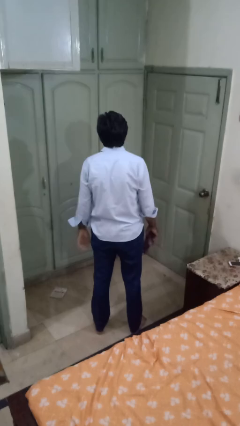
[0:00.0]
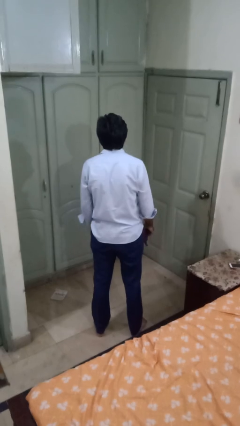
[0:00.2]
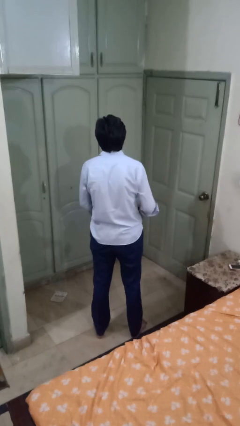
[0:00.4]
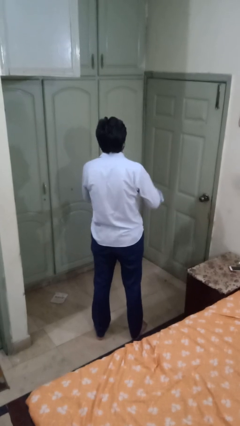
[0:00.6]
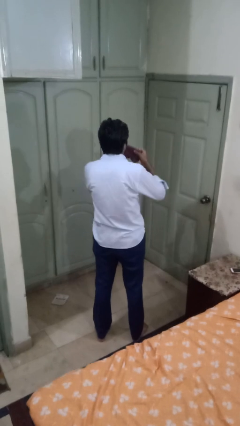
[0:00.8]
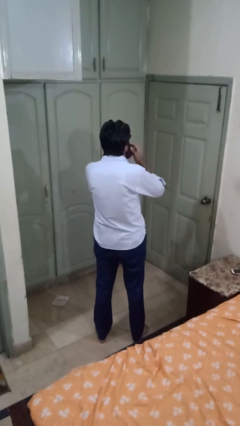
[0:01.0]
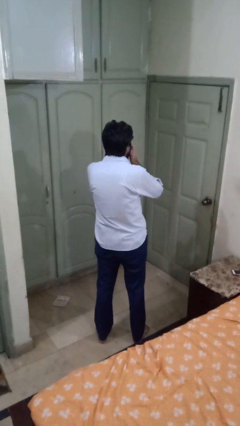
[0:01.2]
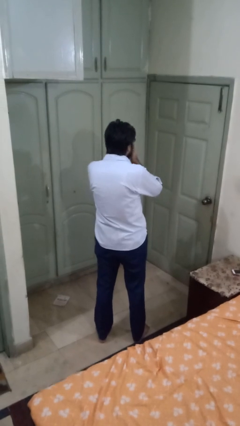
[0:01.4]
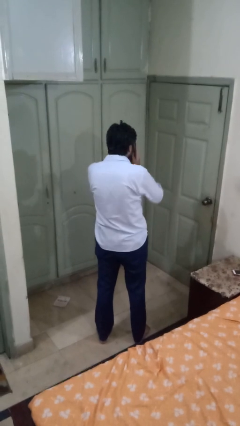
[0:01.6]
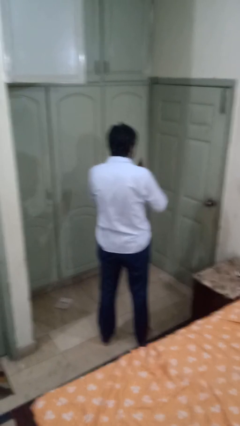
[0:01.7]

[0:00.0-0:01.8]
person blows nose

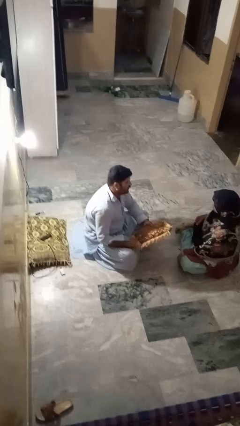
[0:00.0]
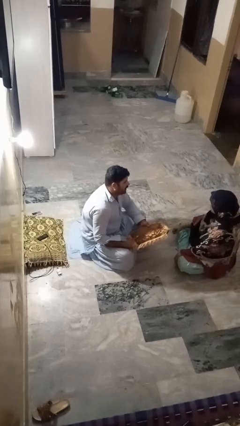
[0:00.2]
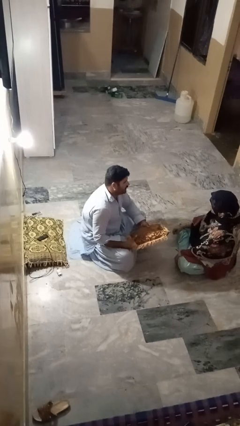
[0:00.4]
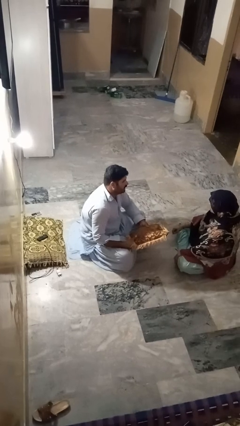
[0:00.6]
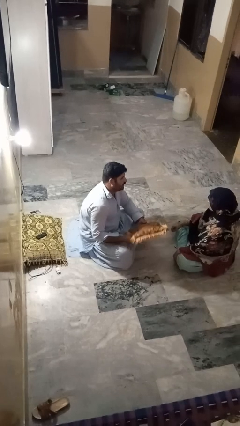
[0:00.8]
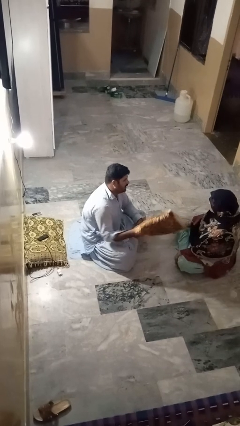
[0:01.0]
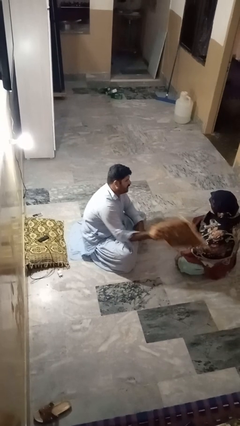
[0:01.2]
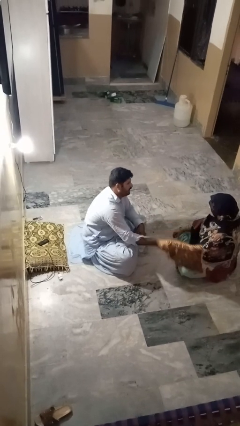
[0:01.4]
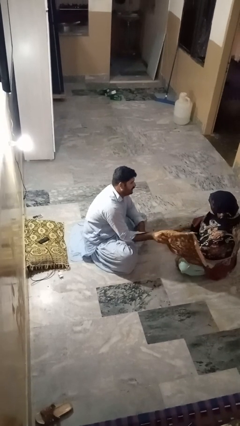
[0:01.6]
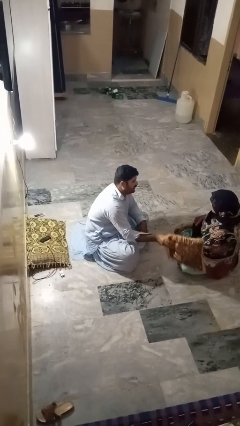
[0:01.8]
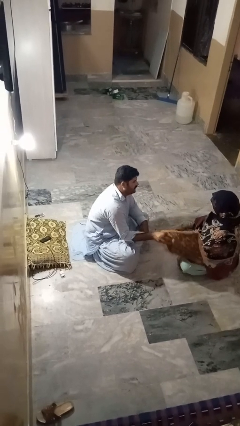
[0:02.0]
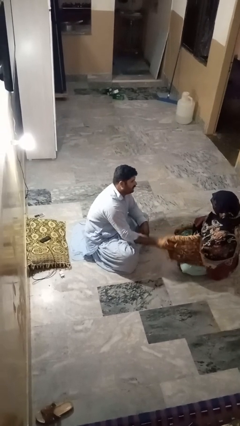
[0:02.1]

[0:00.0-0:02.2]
person hits person with pillow

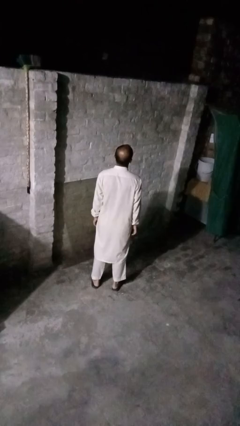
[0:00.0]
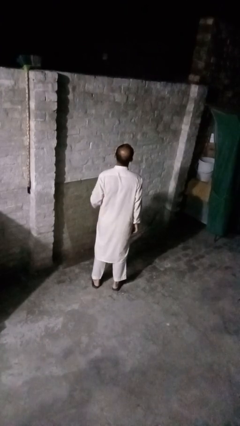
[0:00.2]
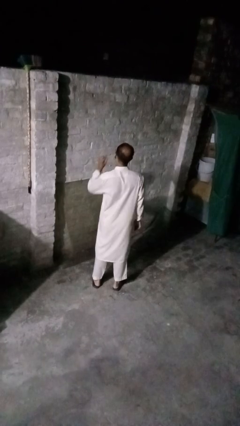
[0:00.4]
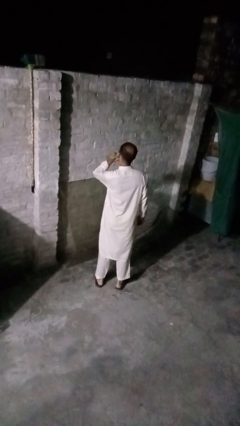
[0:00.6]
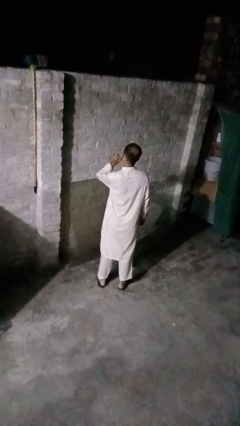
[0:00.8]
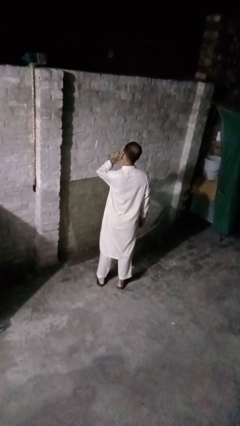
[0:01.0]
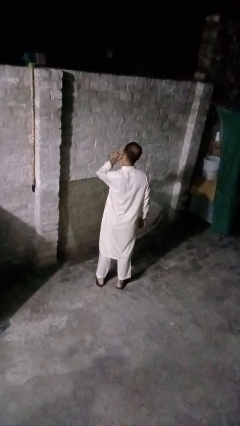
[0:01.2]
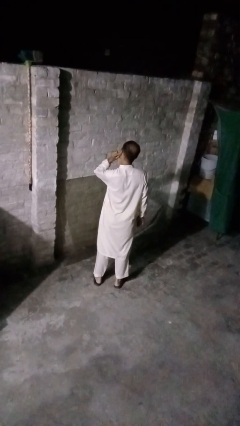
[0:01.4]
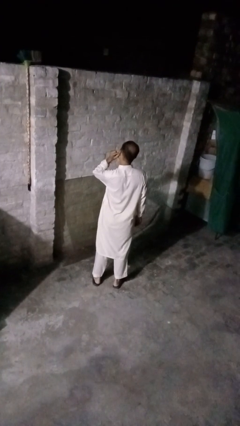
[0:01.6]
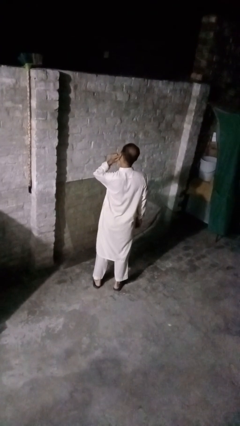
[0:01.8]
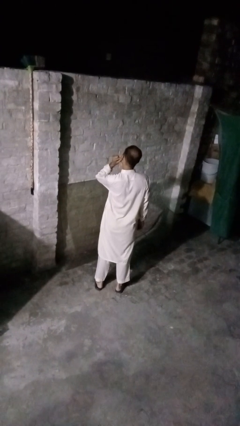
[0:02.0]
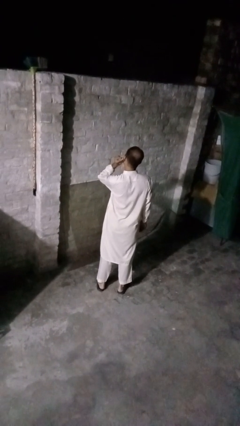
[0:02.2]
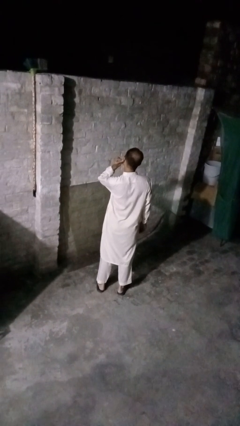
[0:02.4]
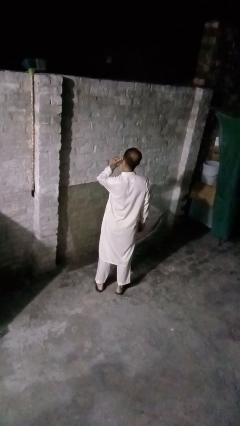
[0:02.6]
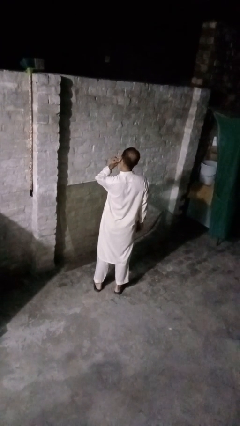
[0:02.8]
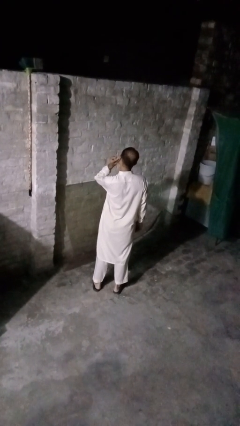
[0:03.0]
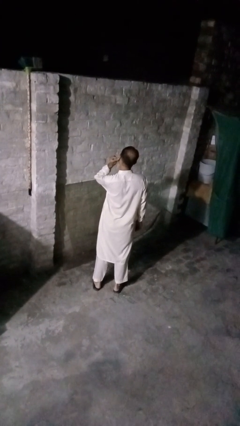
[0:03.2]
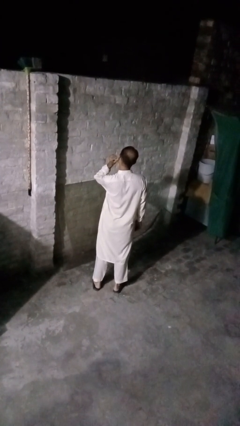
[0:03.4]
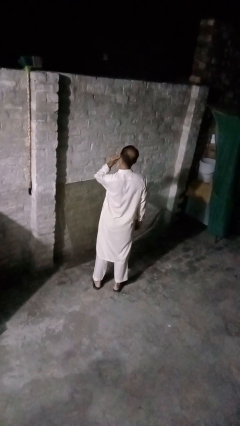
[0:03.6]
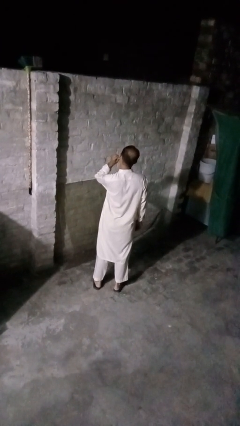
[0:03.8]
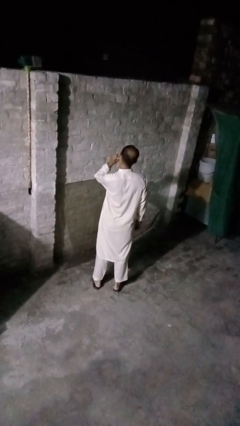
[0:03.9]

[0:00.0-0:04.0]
person touches earlobe

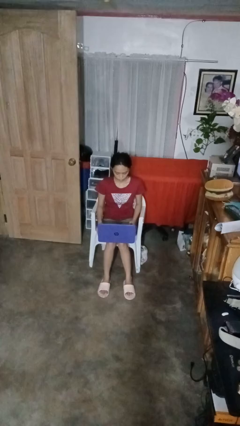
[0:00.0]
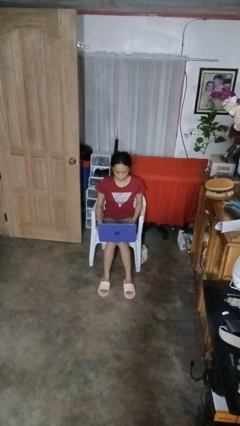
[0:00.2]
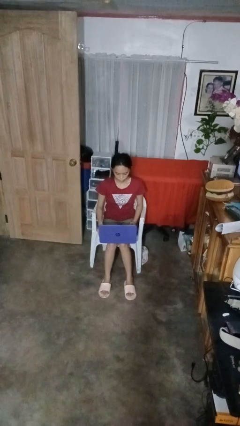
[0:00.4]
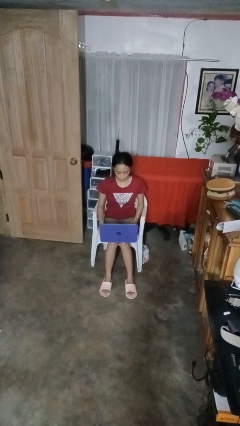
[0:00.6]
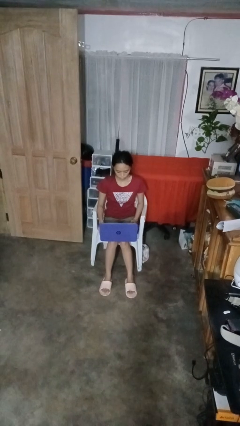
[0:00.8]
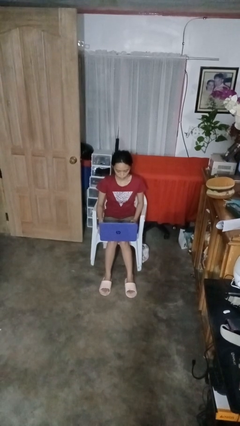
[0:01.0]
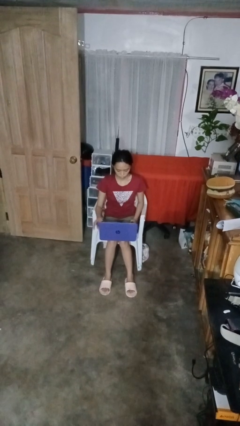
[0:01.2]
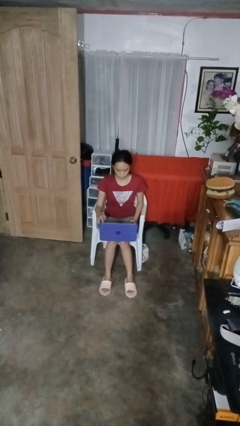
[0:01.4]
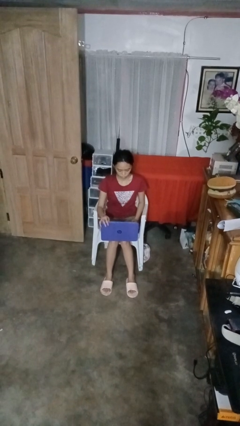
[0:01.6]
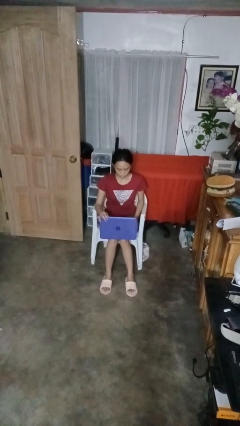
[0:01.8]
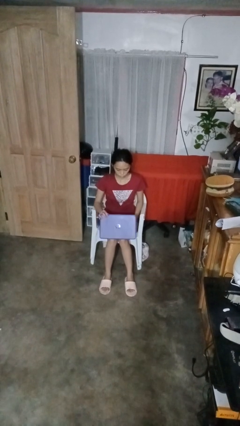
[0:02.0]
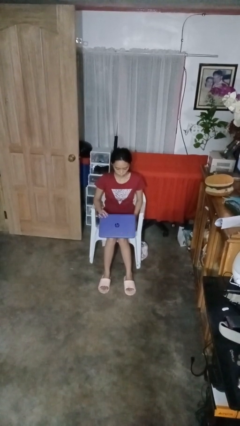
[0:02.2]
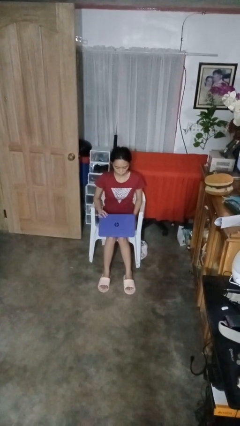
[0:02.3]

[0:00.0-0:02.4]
person closes laptop

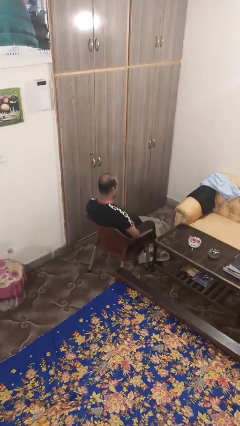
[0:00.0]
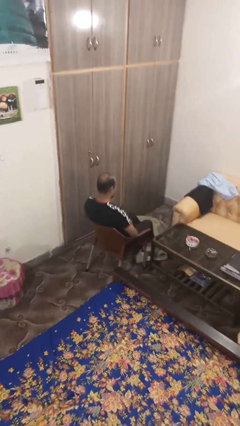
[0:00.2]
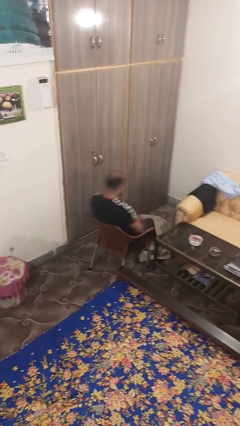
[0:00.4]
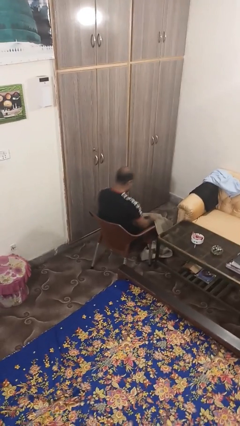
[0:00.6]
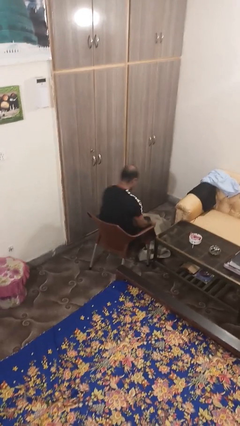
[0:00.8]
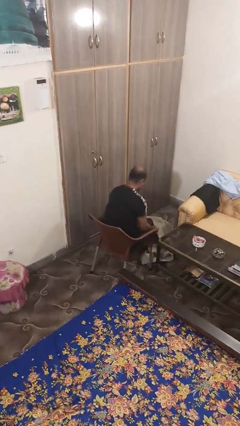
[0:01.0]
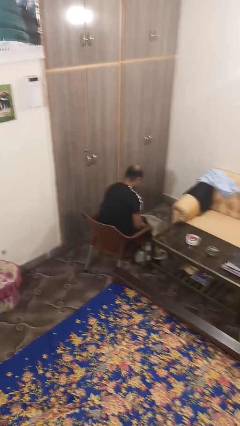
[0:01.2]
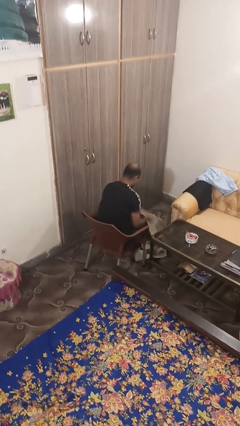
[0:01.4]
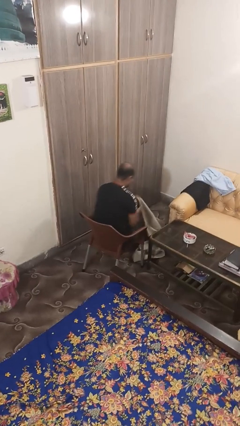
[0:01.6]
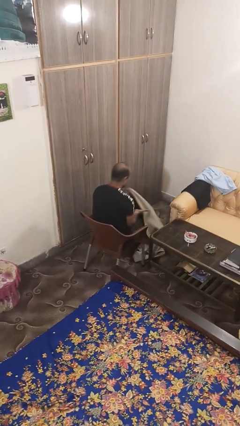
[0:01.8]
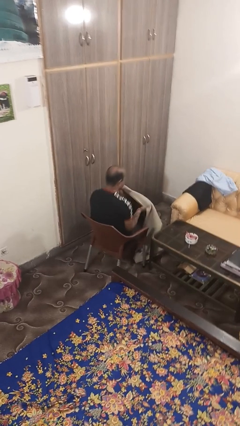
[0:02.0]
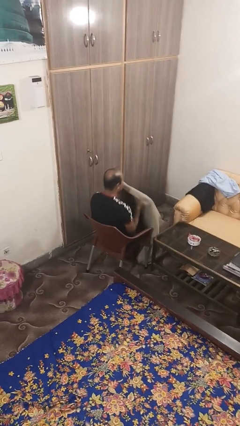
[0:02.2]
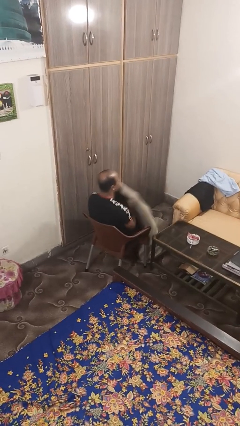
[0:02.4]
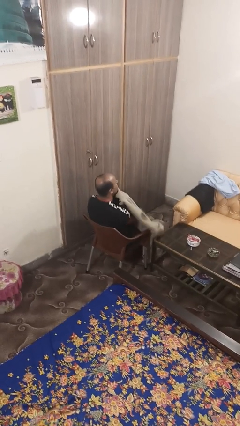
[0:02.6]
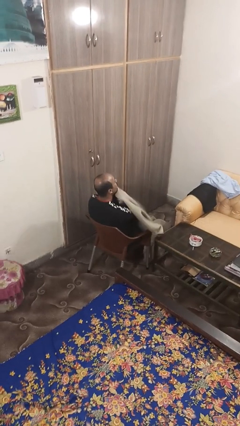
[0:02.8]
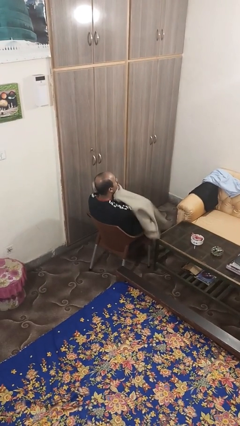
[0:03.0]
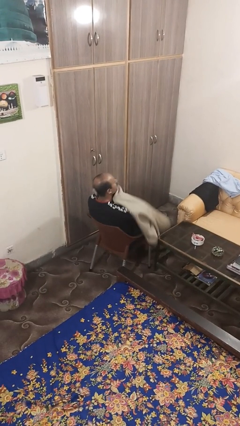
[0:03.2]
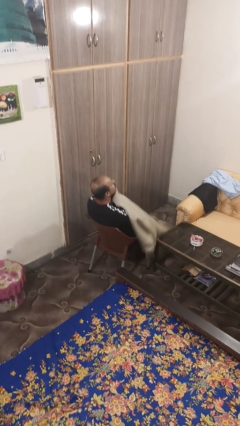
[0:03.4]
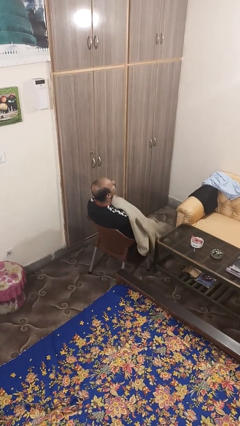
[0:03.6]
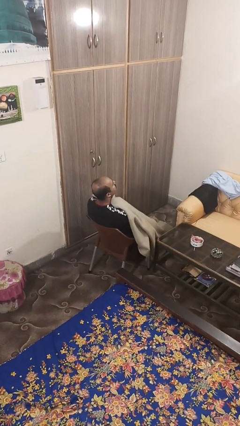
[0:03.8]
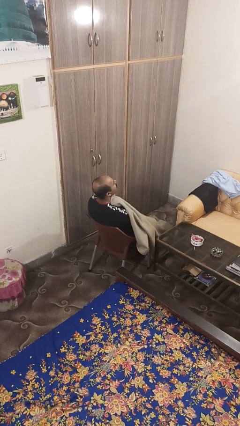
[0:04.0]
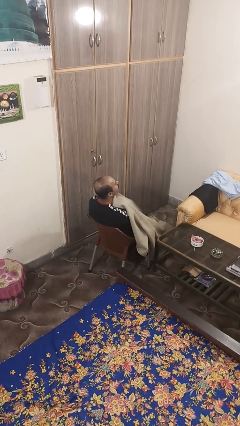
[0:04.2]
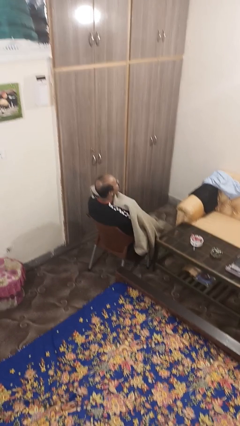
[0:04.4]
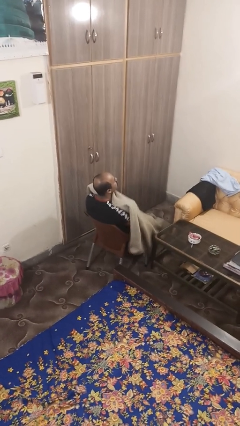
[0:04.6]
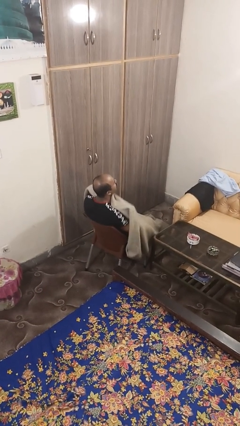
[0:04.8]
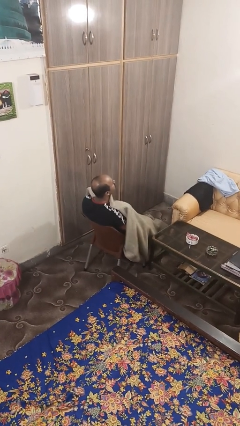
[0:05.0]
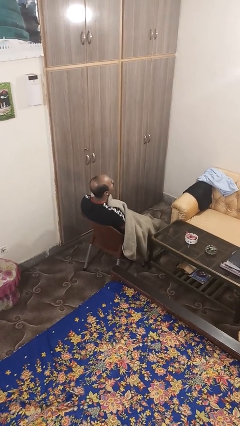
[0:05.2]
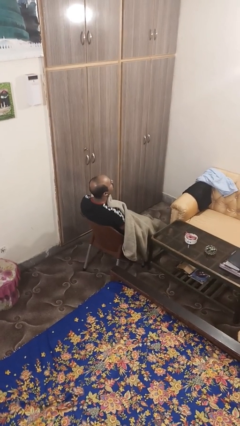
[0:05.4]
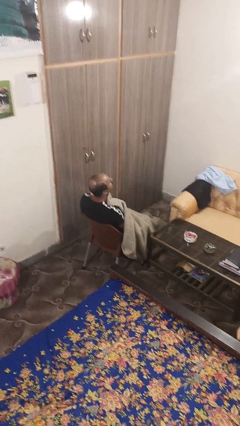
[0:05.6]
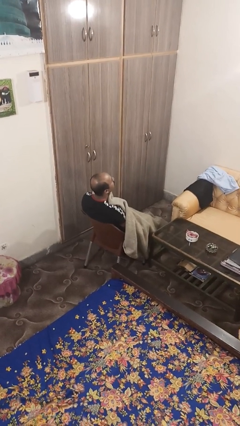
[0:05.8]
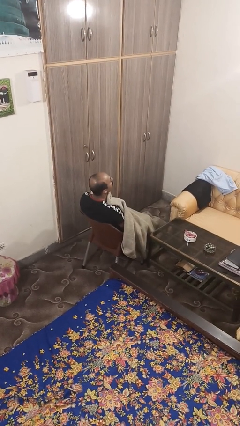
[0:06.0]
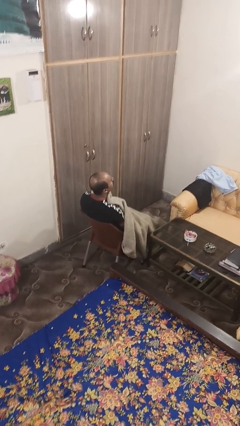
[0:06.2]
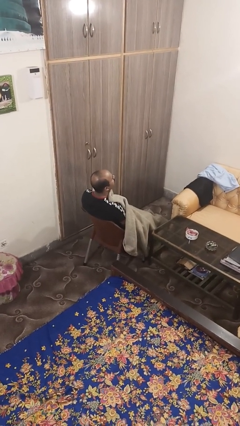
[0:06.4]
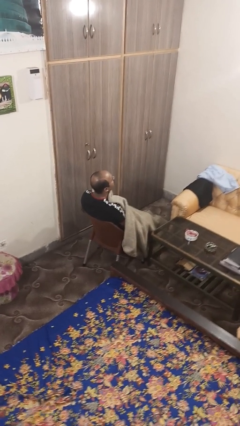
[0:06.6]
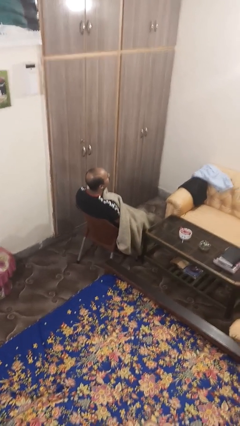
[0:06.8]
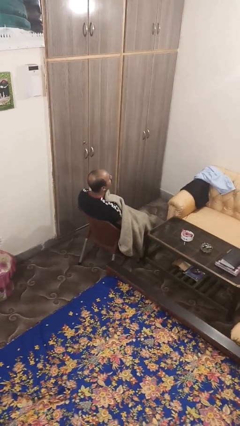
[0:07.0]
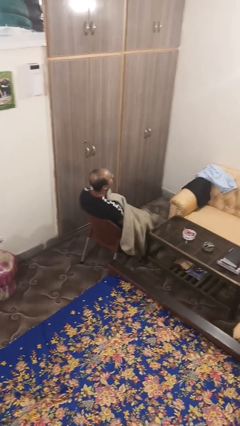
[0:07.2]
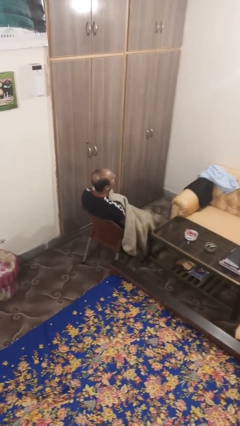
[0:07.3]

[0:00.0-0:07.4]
person covers with blanket
